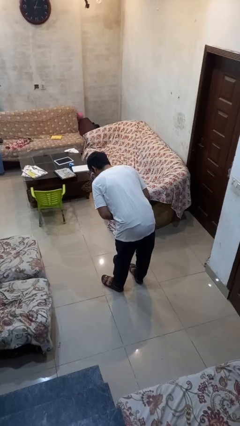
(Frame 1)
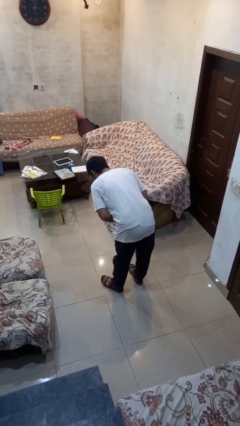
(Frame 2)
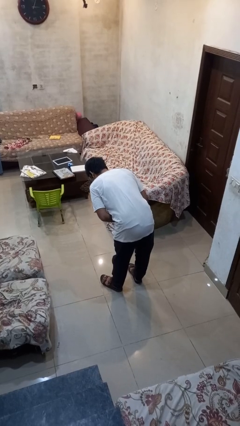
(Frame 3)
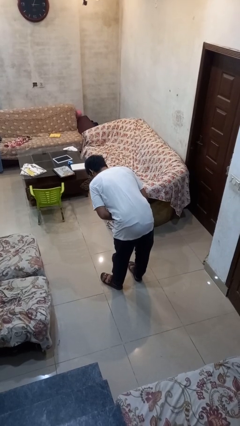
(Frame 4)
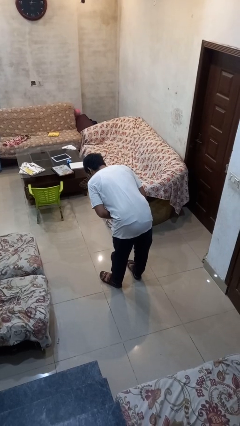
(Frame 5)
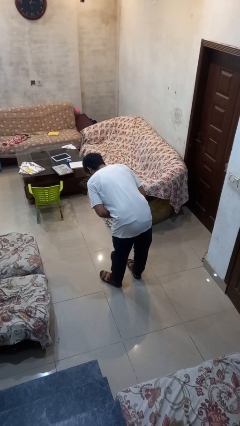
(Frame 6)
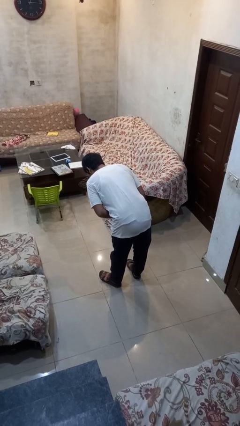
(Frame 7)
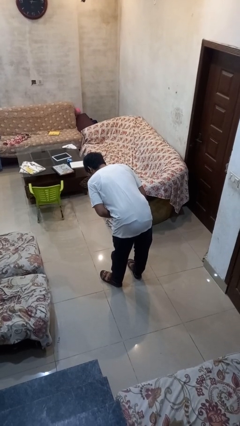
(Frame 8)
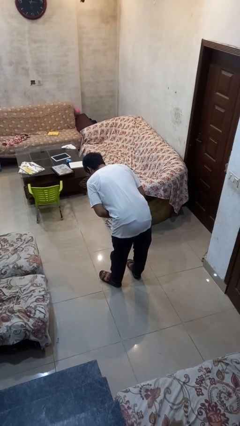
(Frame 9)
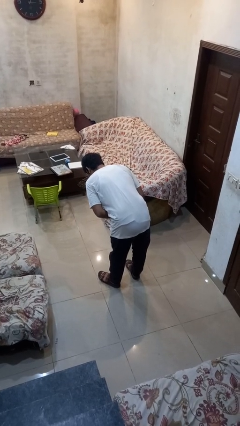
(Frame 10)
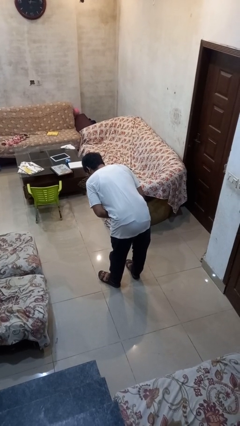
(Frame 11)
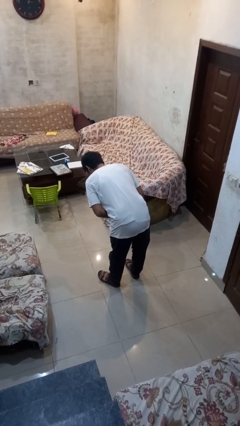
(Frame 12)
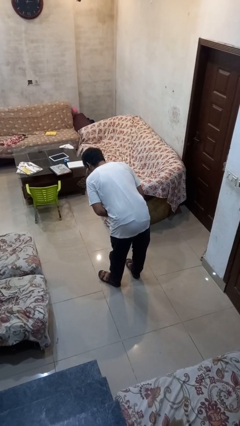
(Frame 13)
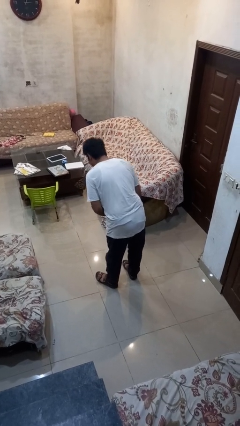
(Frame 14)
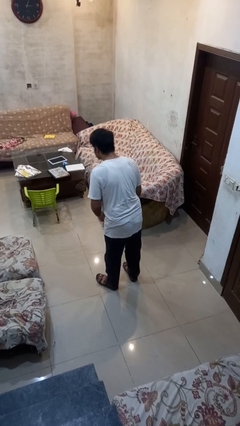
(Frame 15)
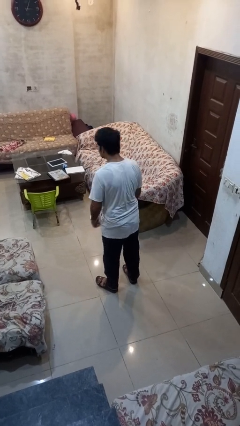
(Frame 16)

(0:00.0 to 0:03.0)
person bows

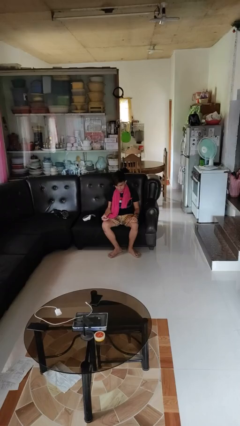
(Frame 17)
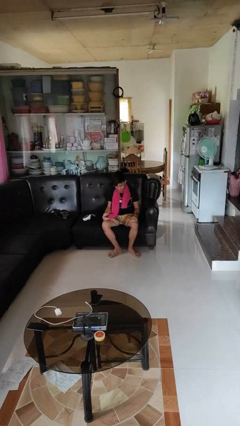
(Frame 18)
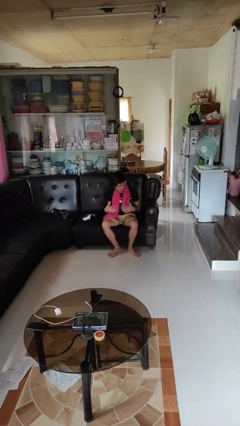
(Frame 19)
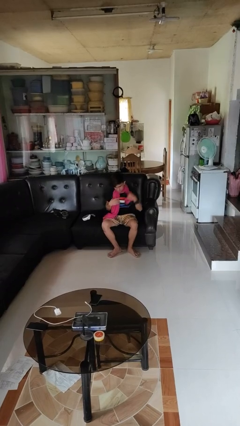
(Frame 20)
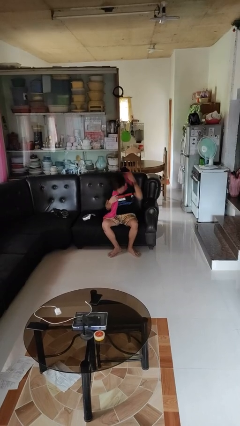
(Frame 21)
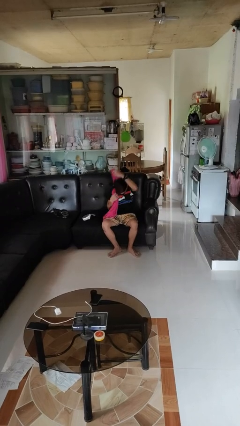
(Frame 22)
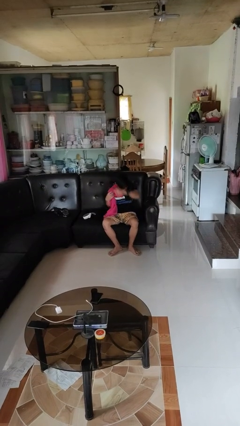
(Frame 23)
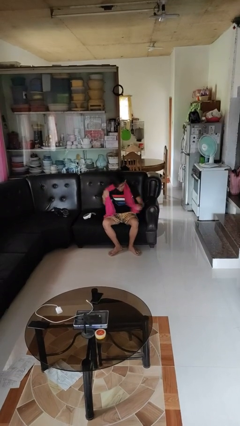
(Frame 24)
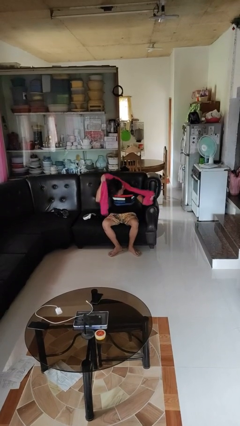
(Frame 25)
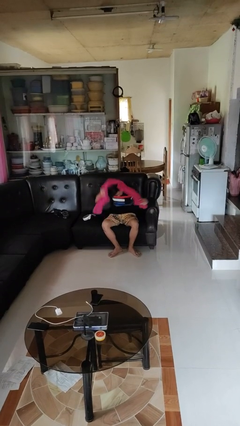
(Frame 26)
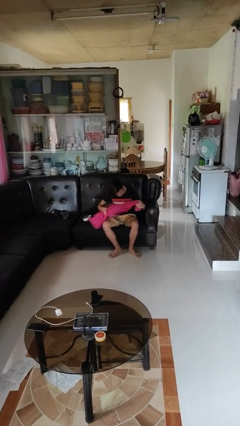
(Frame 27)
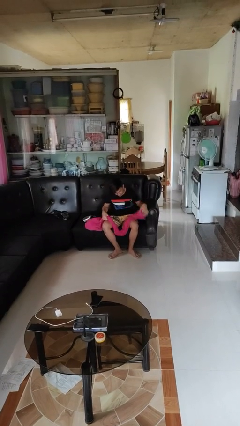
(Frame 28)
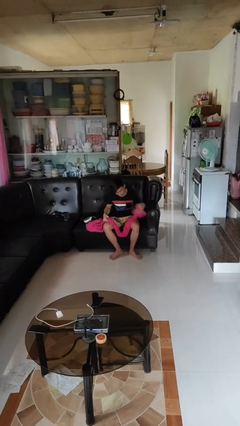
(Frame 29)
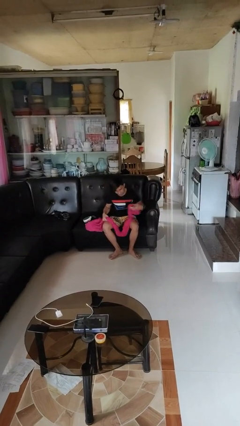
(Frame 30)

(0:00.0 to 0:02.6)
person takes off scarf

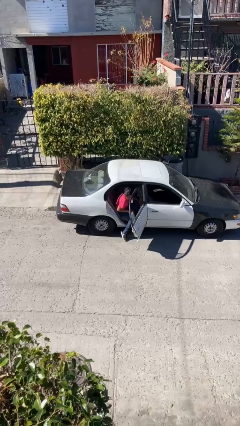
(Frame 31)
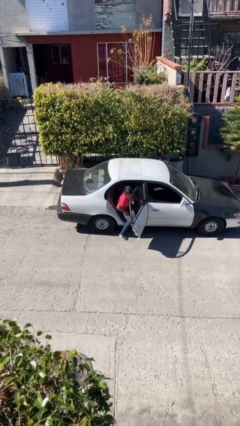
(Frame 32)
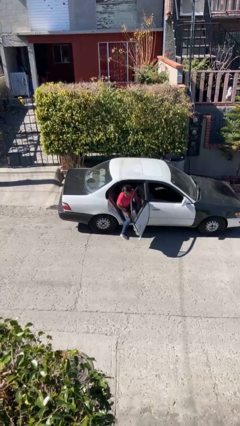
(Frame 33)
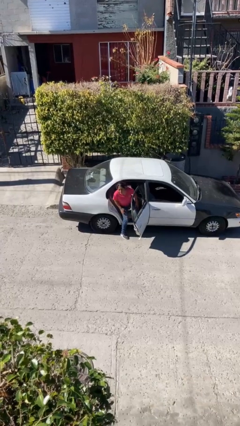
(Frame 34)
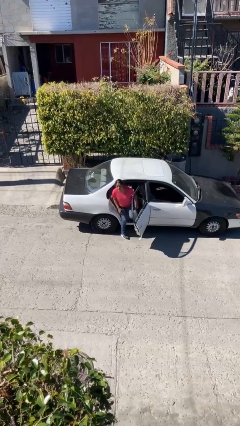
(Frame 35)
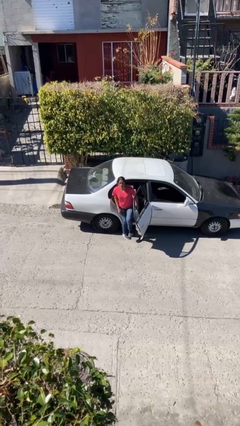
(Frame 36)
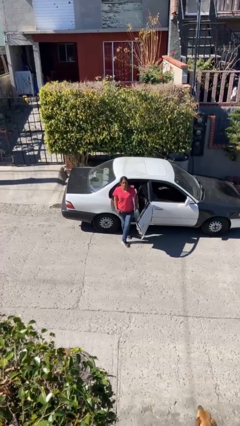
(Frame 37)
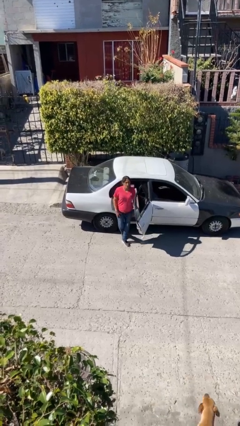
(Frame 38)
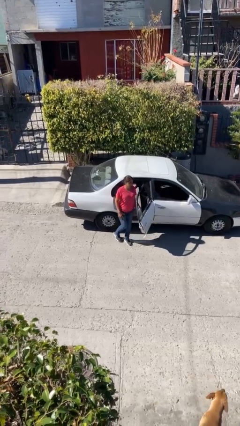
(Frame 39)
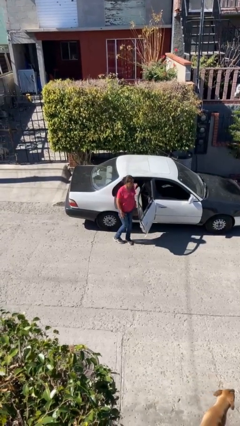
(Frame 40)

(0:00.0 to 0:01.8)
person exits car

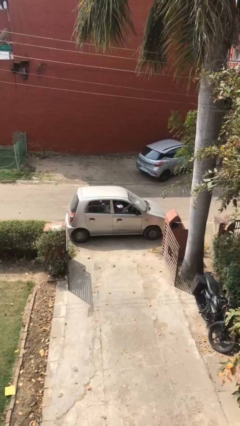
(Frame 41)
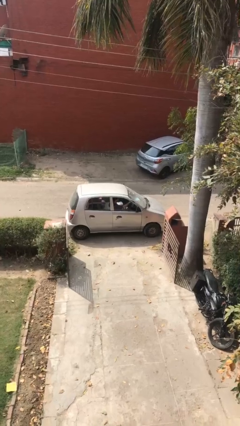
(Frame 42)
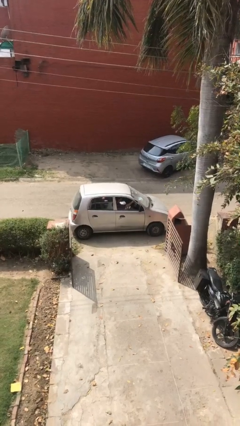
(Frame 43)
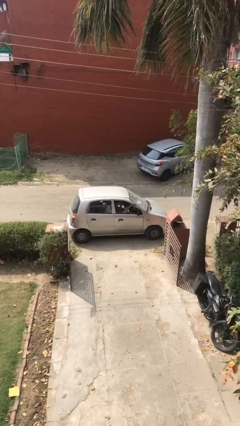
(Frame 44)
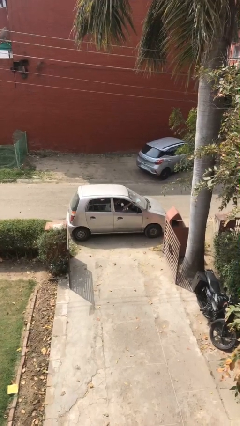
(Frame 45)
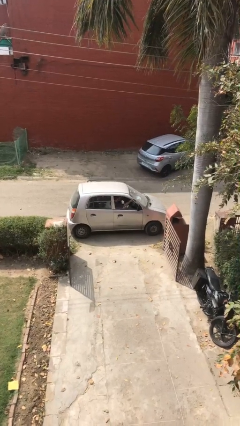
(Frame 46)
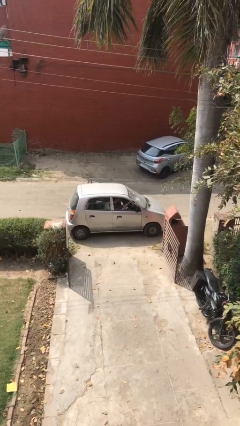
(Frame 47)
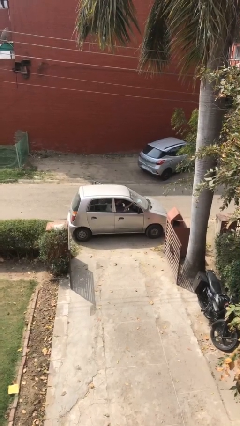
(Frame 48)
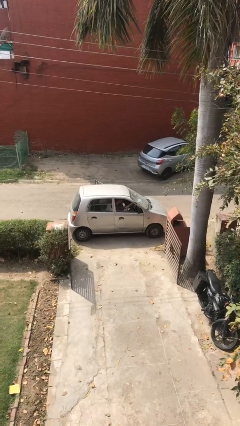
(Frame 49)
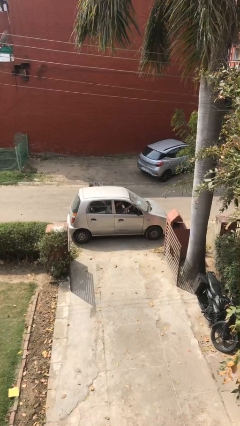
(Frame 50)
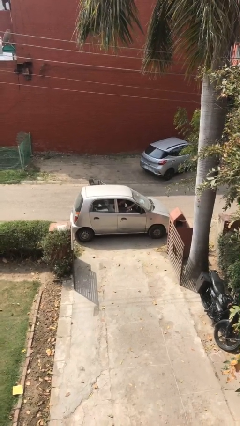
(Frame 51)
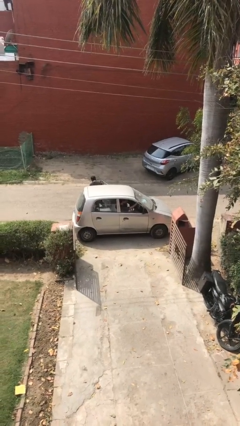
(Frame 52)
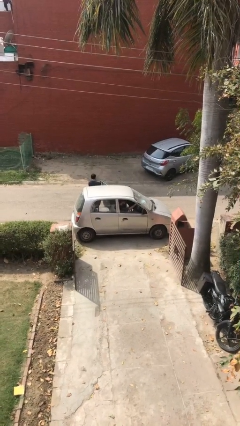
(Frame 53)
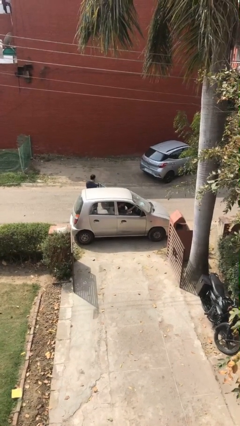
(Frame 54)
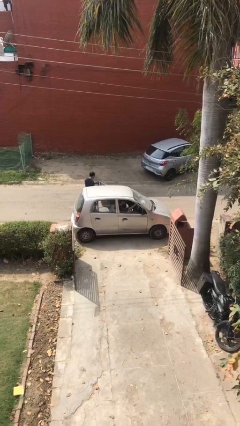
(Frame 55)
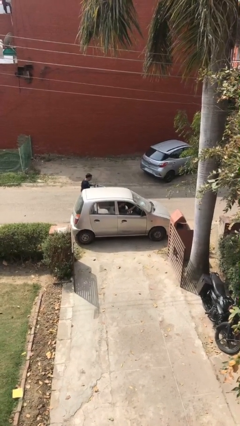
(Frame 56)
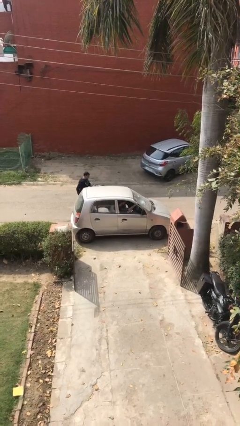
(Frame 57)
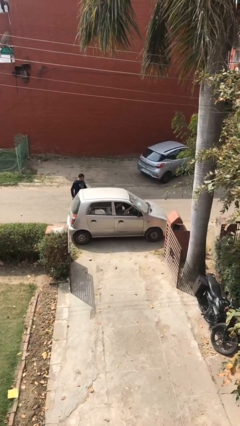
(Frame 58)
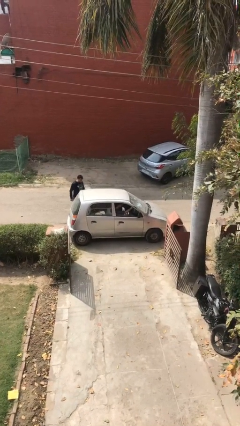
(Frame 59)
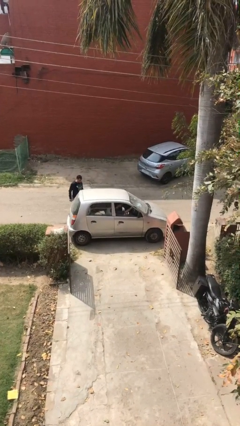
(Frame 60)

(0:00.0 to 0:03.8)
car drops off person

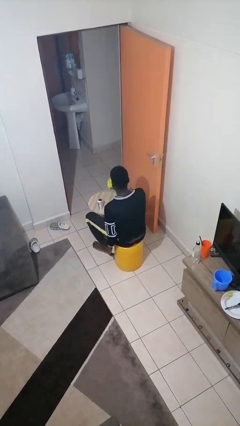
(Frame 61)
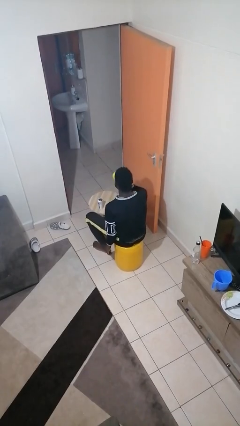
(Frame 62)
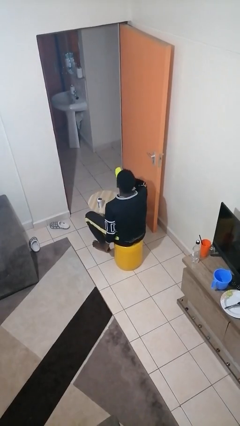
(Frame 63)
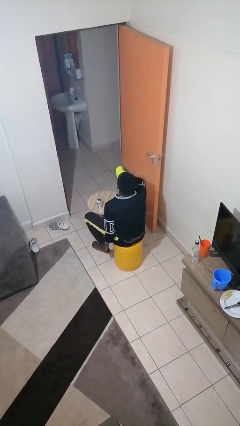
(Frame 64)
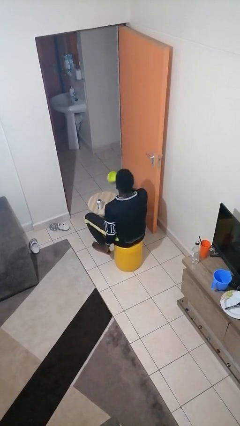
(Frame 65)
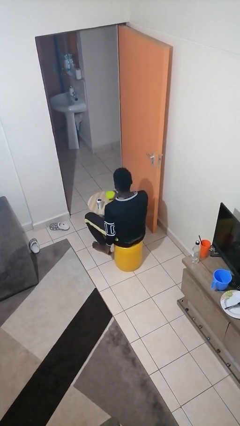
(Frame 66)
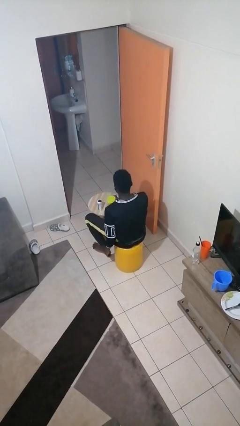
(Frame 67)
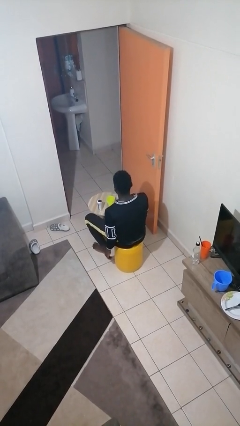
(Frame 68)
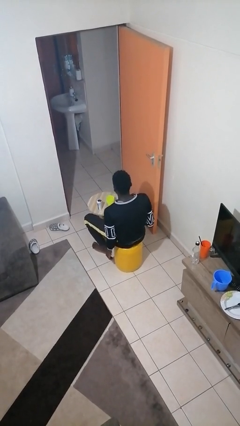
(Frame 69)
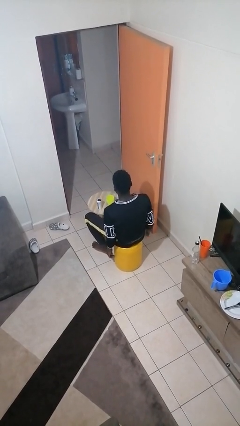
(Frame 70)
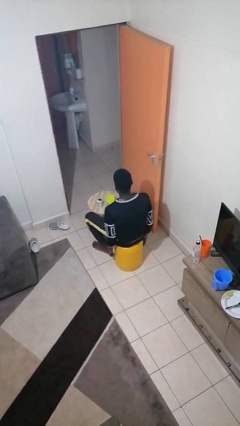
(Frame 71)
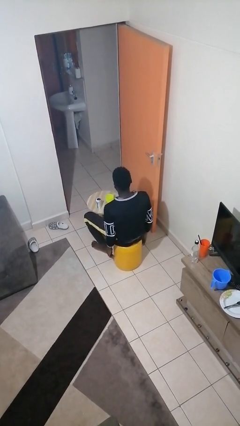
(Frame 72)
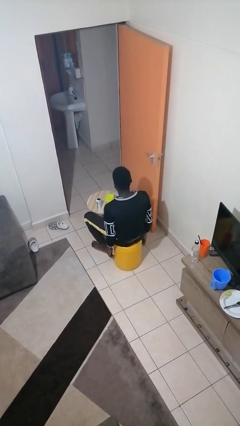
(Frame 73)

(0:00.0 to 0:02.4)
person drinks from cup

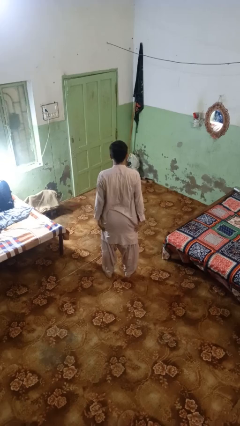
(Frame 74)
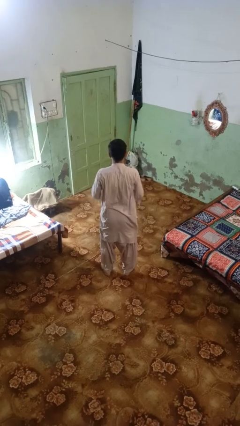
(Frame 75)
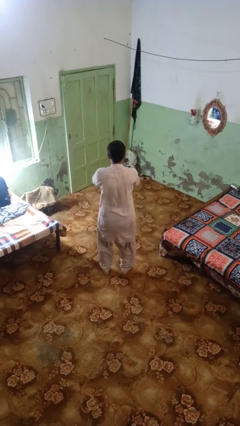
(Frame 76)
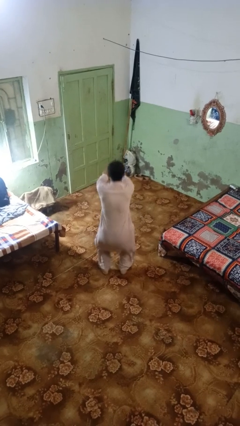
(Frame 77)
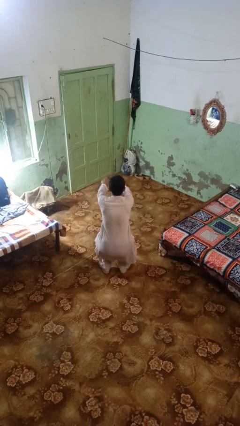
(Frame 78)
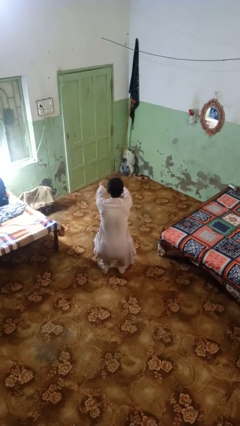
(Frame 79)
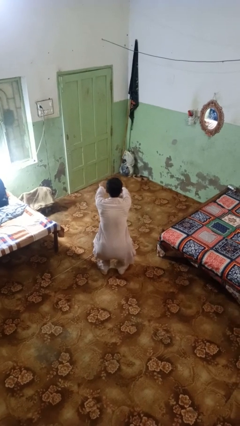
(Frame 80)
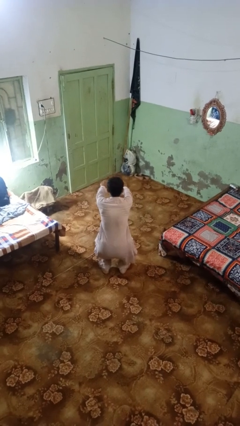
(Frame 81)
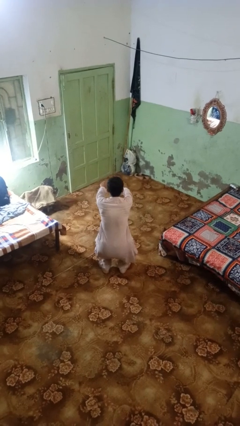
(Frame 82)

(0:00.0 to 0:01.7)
person squats

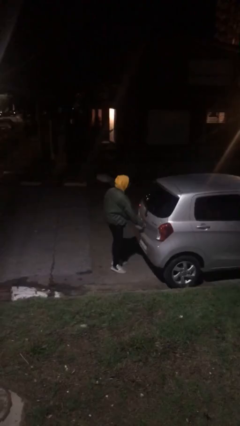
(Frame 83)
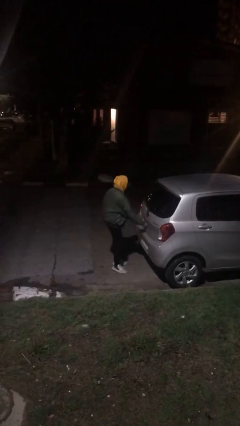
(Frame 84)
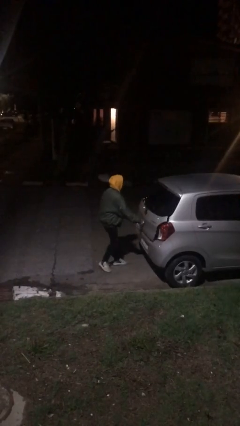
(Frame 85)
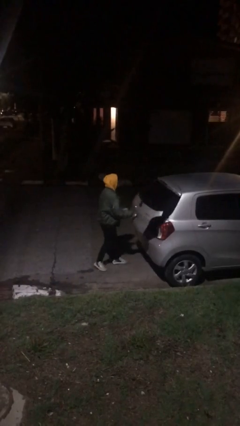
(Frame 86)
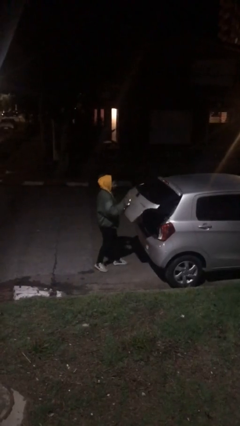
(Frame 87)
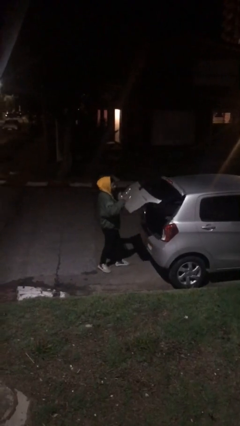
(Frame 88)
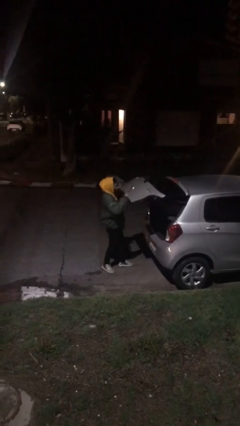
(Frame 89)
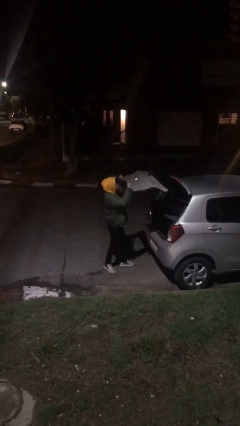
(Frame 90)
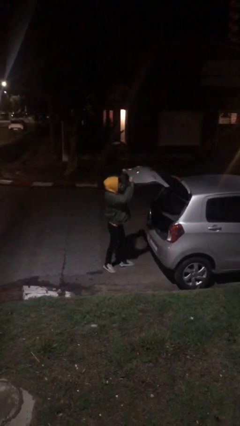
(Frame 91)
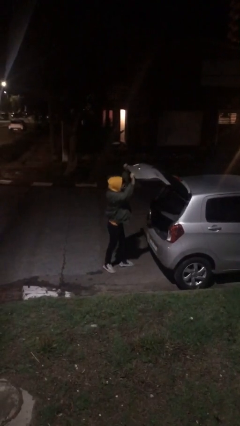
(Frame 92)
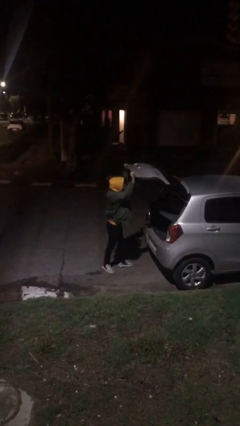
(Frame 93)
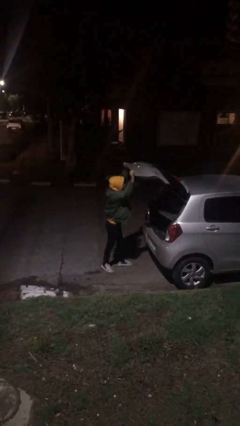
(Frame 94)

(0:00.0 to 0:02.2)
person opens car trunk
